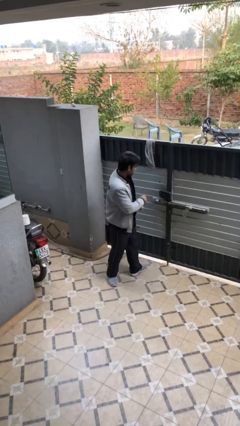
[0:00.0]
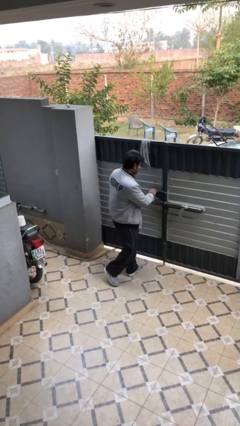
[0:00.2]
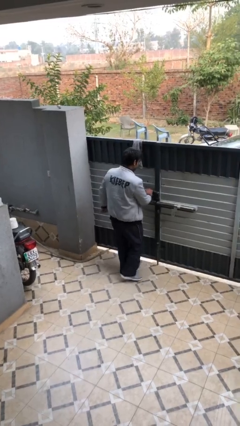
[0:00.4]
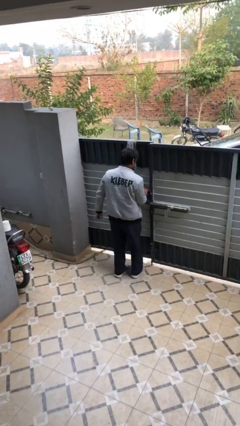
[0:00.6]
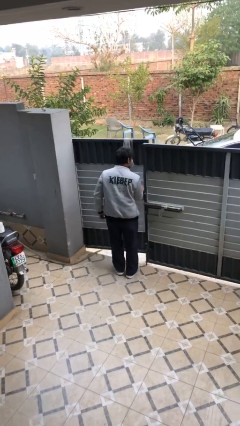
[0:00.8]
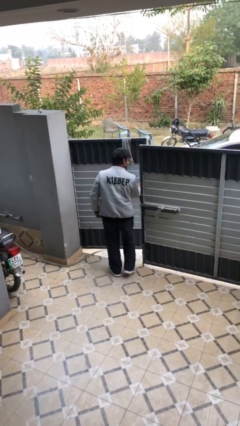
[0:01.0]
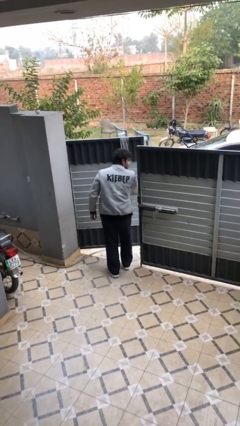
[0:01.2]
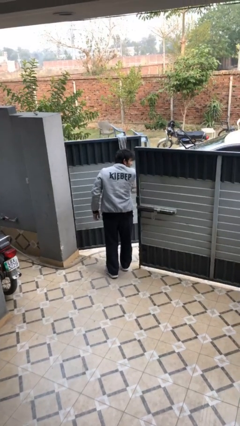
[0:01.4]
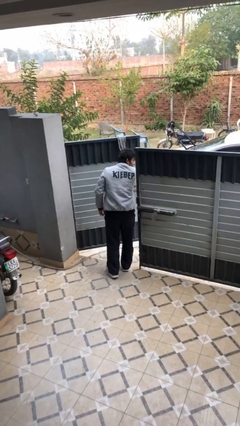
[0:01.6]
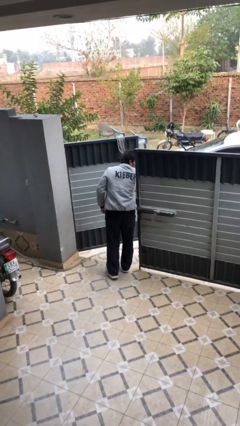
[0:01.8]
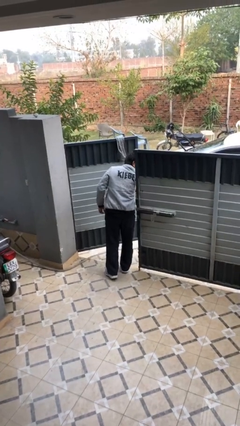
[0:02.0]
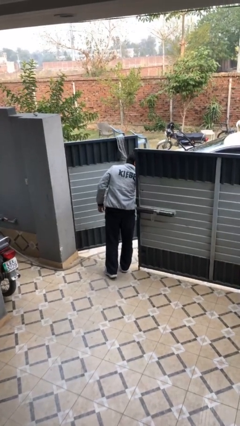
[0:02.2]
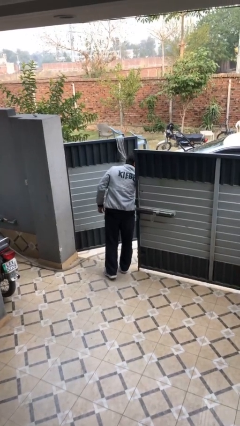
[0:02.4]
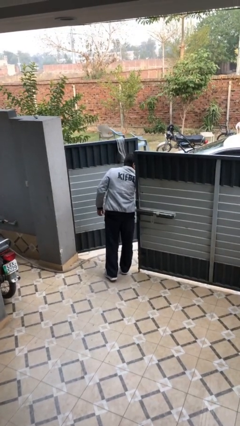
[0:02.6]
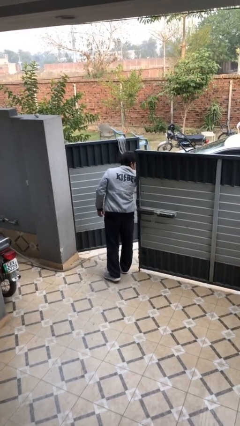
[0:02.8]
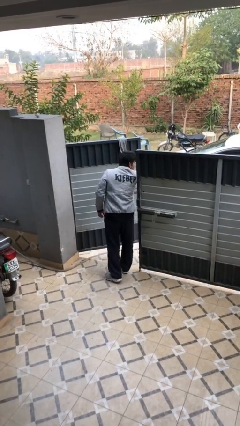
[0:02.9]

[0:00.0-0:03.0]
person opens facility door

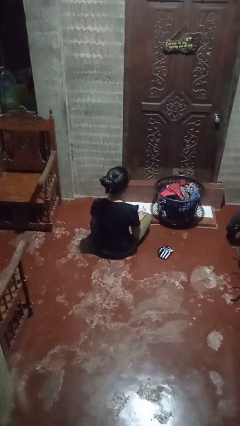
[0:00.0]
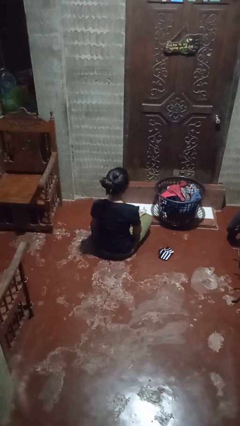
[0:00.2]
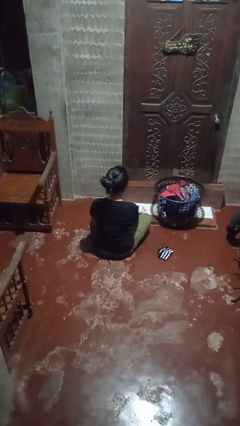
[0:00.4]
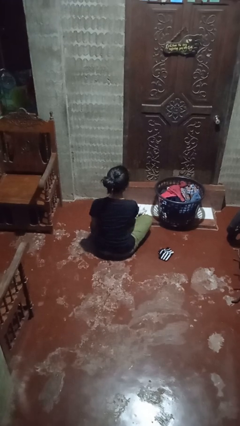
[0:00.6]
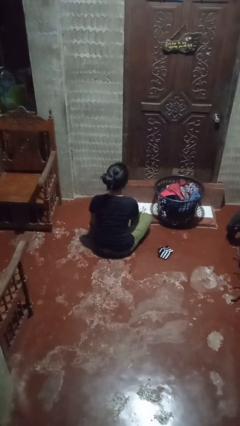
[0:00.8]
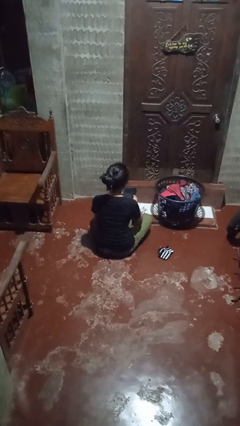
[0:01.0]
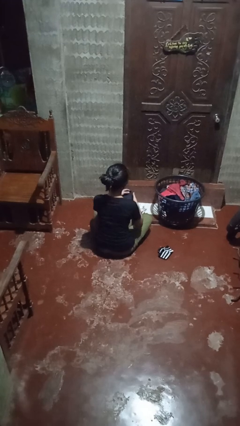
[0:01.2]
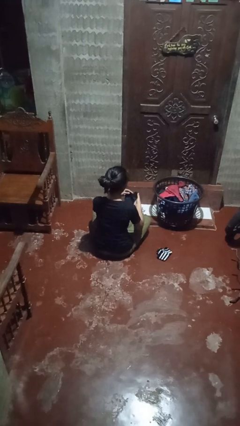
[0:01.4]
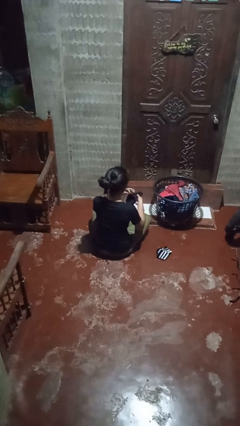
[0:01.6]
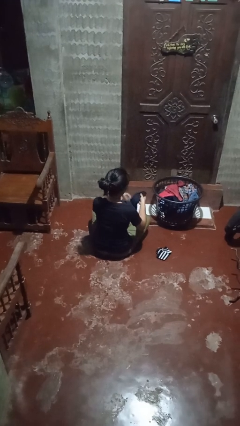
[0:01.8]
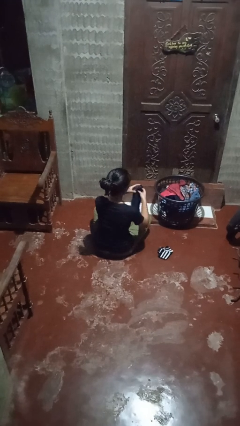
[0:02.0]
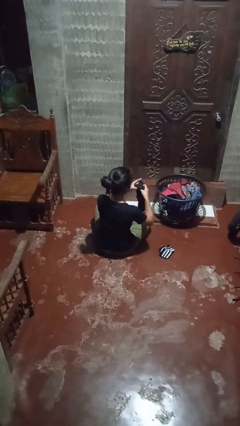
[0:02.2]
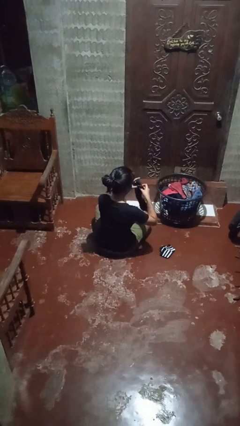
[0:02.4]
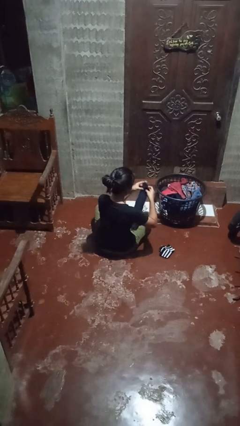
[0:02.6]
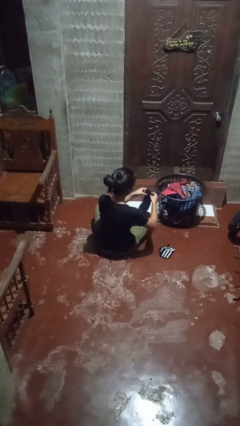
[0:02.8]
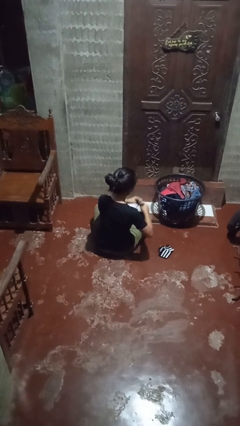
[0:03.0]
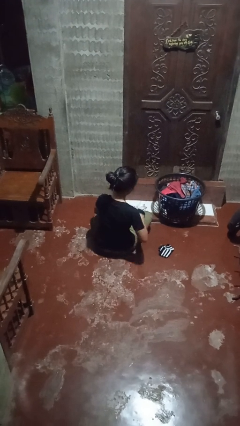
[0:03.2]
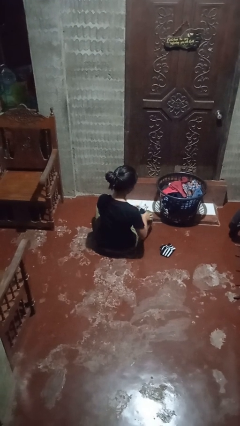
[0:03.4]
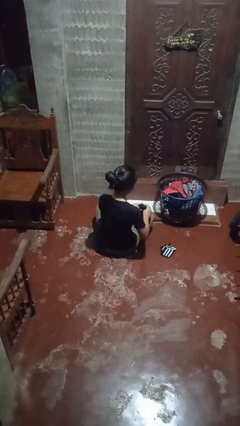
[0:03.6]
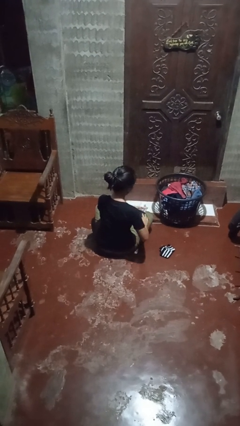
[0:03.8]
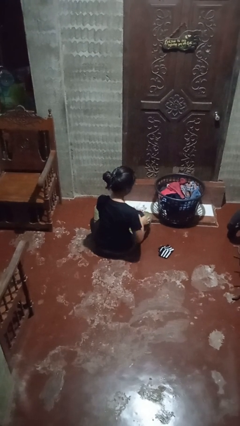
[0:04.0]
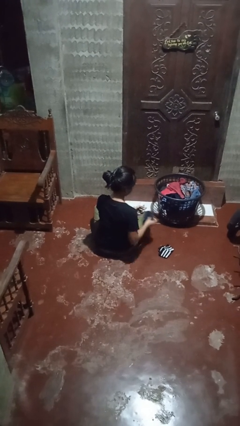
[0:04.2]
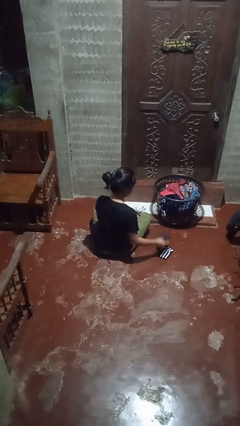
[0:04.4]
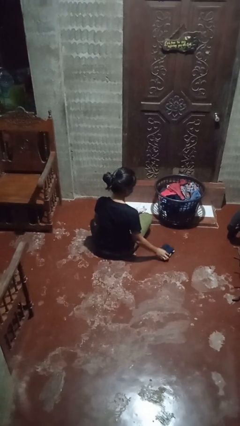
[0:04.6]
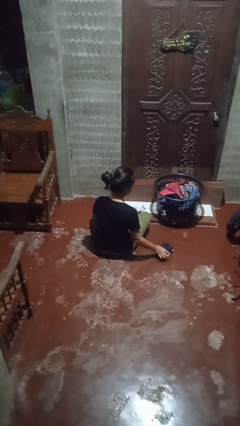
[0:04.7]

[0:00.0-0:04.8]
person folds socks

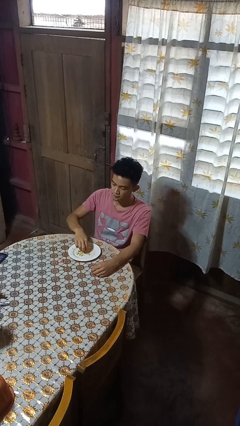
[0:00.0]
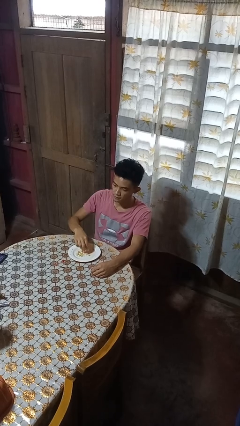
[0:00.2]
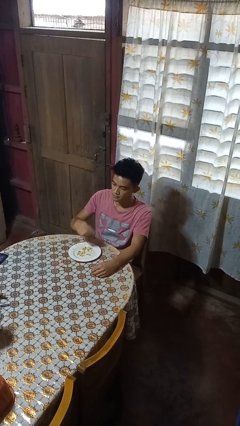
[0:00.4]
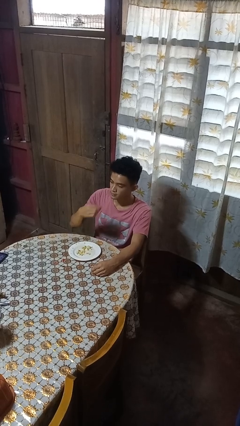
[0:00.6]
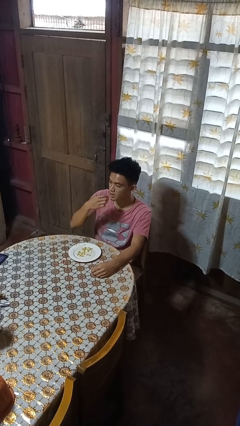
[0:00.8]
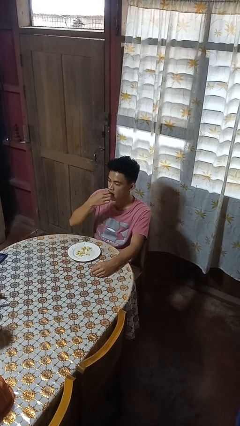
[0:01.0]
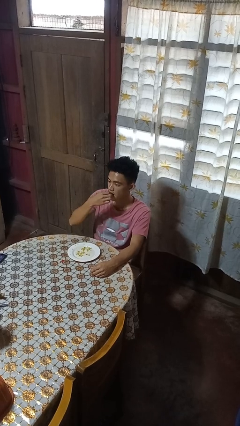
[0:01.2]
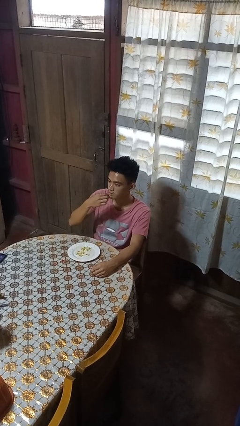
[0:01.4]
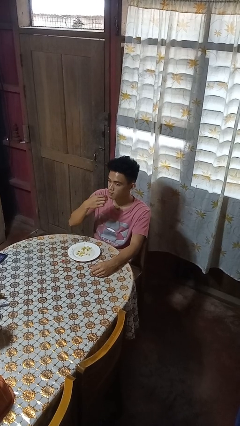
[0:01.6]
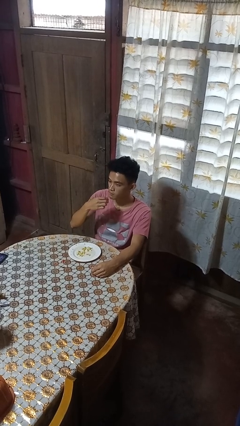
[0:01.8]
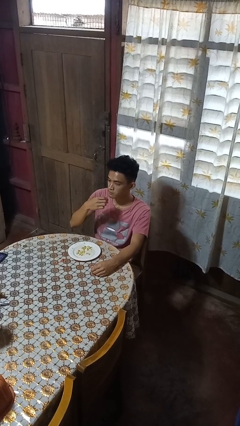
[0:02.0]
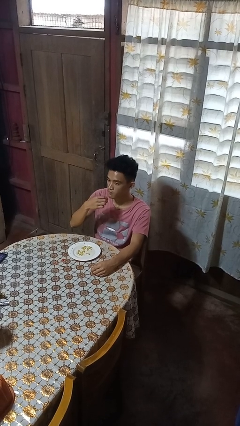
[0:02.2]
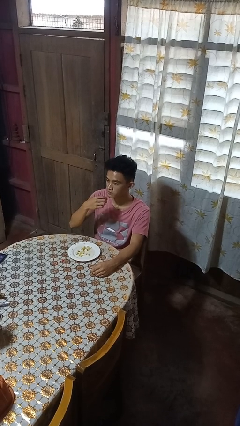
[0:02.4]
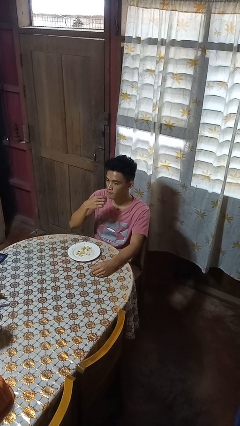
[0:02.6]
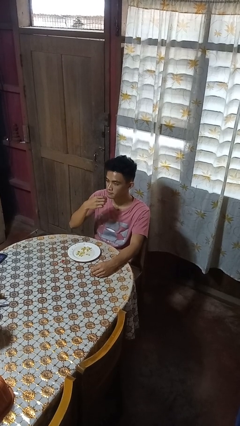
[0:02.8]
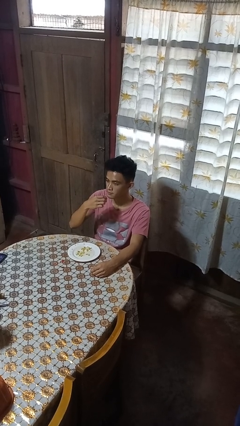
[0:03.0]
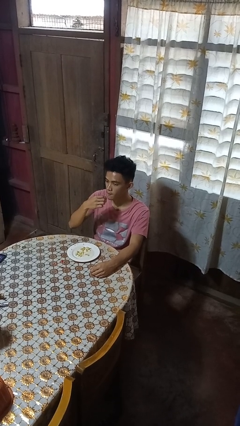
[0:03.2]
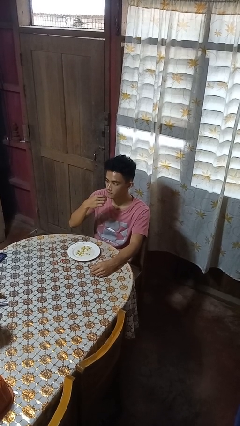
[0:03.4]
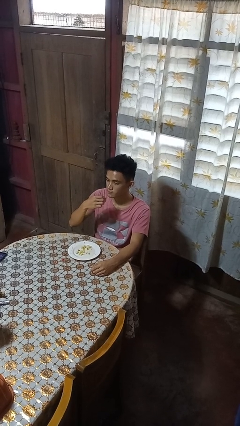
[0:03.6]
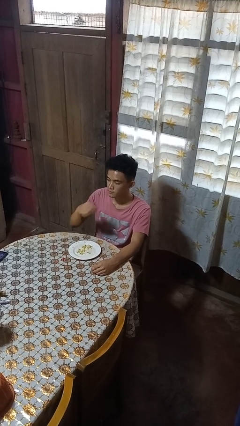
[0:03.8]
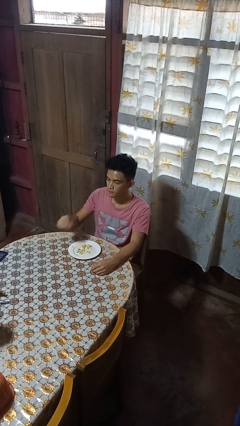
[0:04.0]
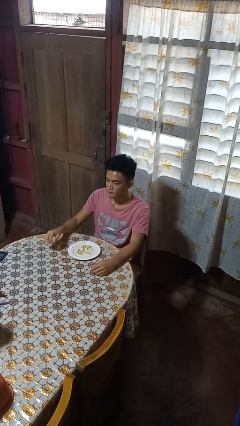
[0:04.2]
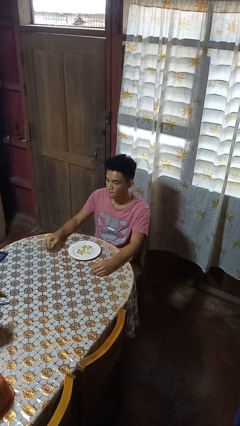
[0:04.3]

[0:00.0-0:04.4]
person eats with hands

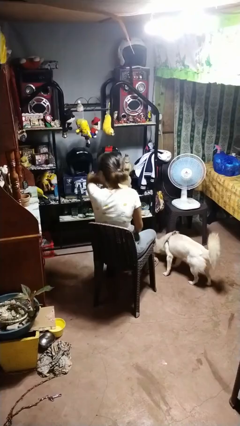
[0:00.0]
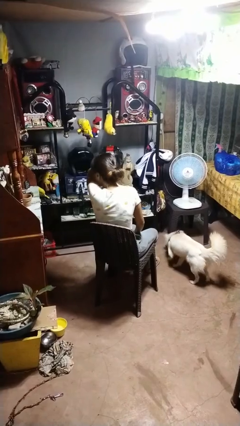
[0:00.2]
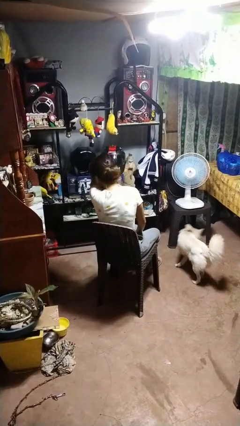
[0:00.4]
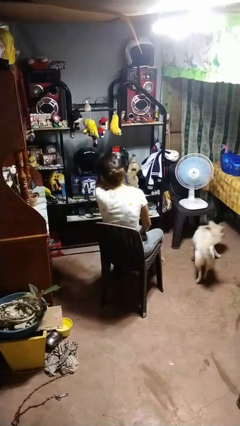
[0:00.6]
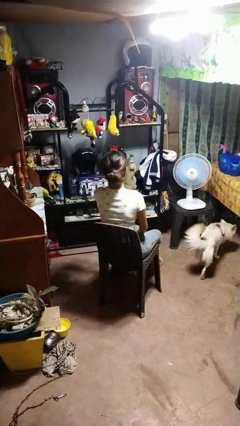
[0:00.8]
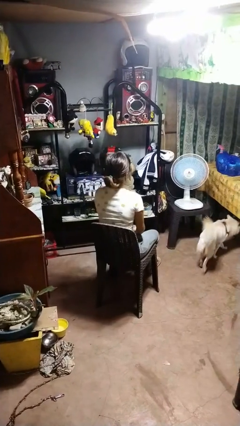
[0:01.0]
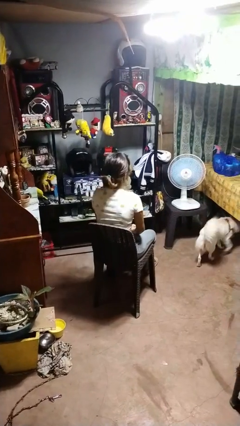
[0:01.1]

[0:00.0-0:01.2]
person sneezes into arm

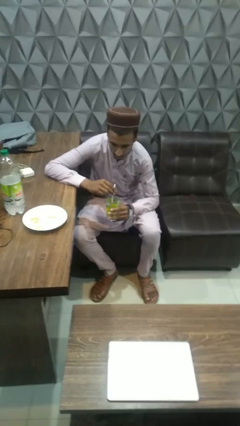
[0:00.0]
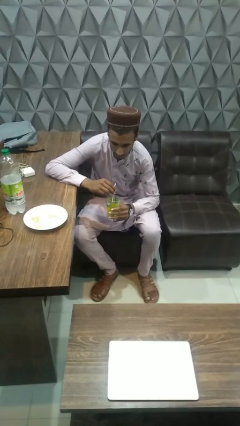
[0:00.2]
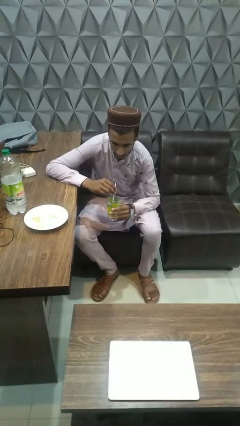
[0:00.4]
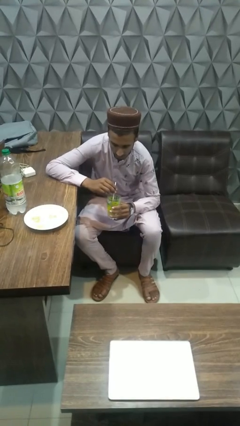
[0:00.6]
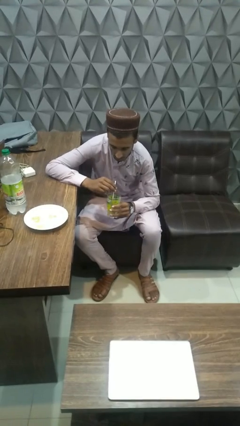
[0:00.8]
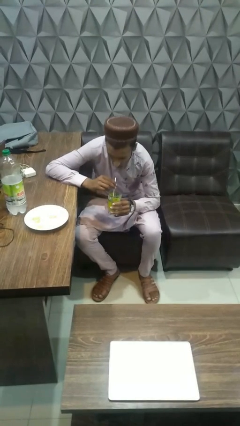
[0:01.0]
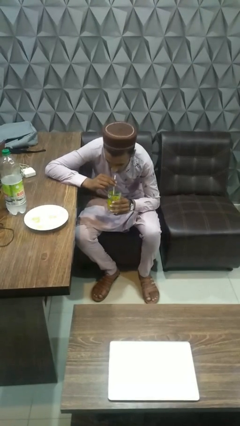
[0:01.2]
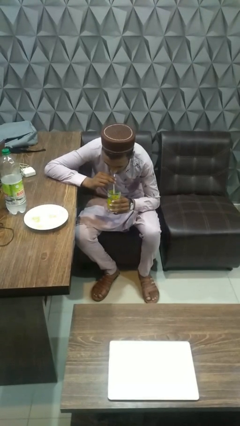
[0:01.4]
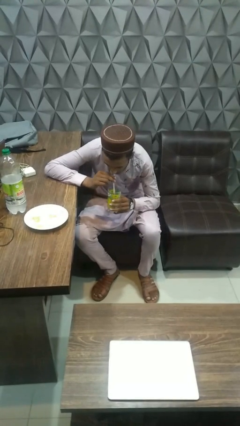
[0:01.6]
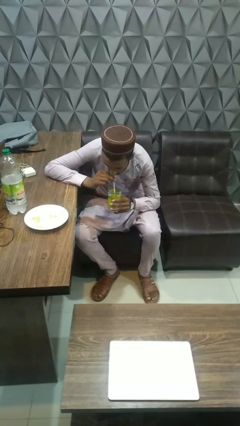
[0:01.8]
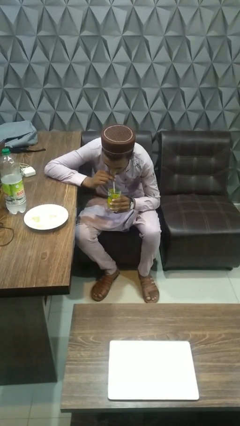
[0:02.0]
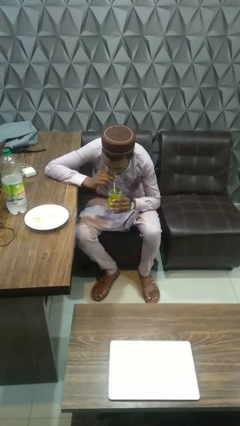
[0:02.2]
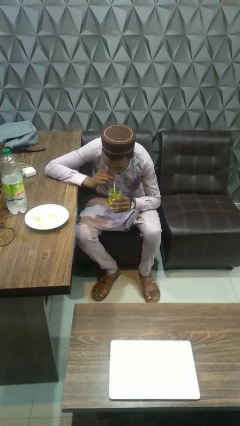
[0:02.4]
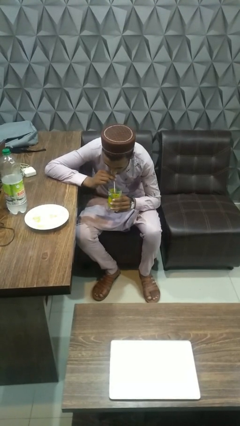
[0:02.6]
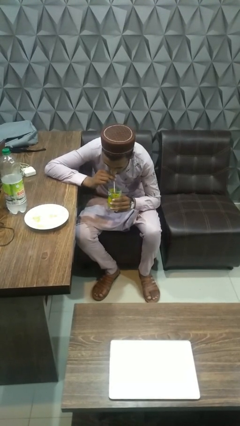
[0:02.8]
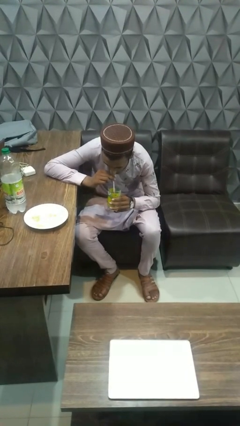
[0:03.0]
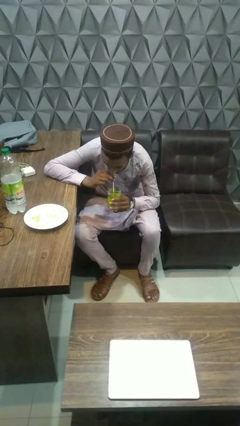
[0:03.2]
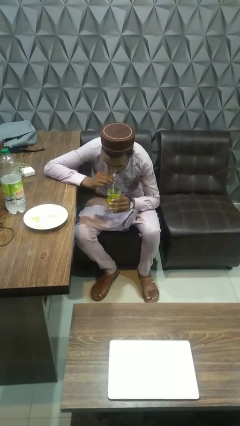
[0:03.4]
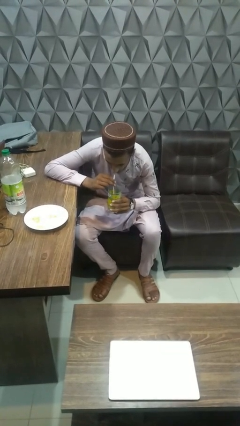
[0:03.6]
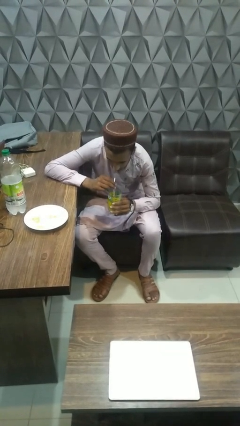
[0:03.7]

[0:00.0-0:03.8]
person drinks from straw
